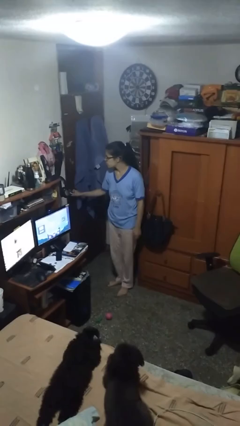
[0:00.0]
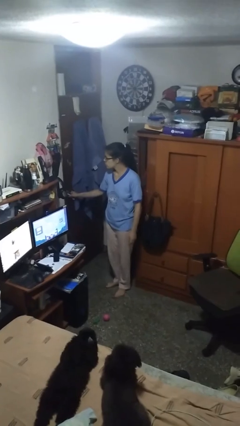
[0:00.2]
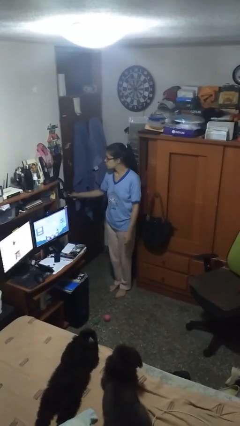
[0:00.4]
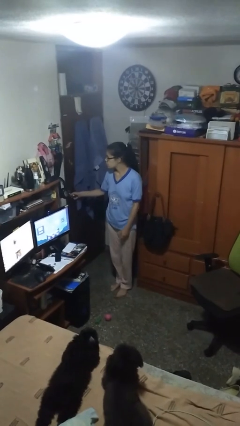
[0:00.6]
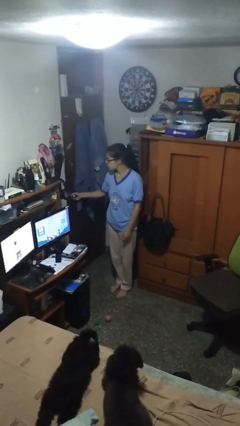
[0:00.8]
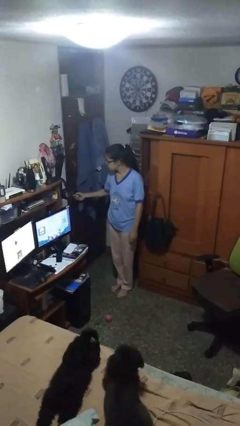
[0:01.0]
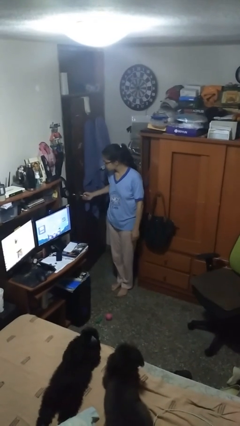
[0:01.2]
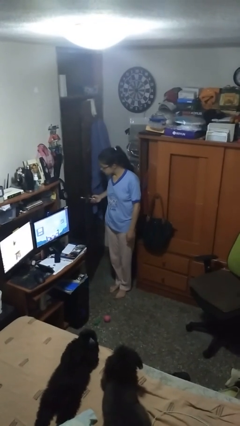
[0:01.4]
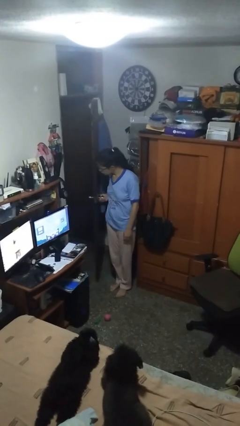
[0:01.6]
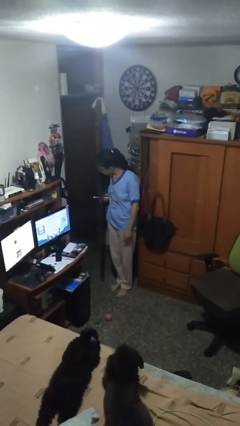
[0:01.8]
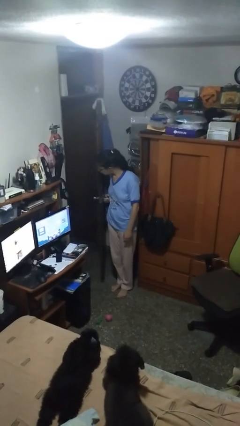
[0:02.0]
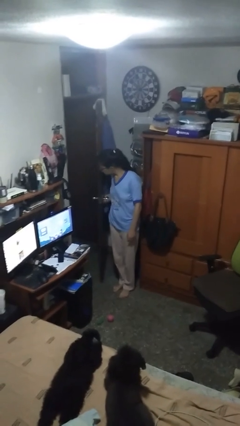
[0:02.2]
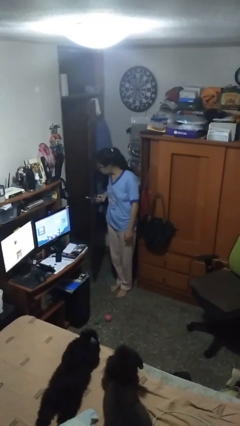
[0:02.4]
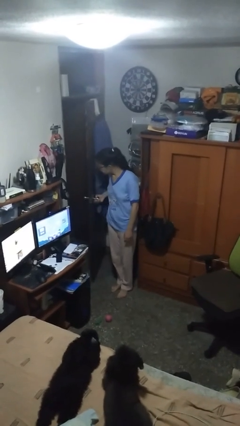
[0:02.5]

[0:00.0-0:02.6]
person opens facility door

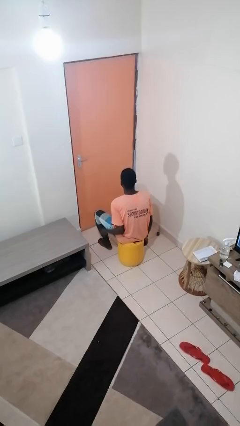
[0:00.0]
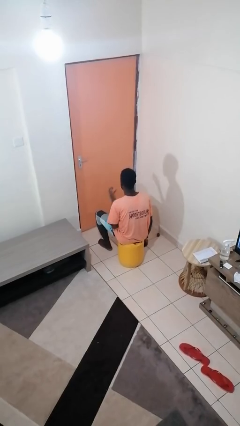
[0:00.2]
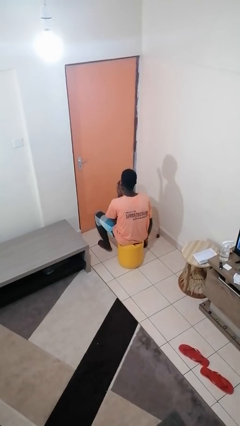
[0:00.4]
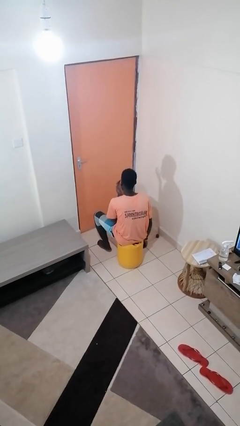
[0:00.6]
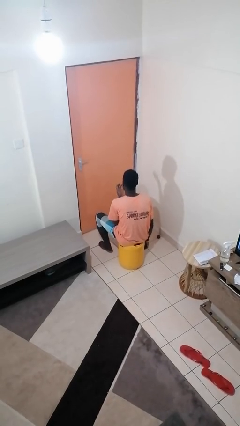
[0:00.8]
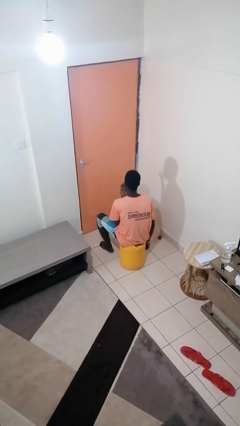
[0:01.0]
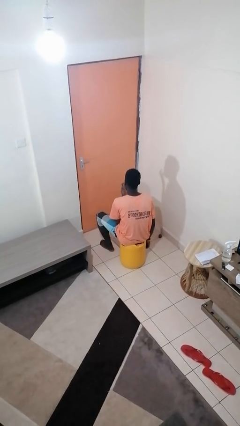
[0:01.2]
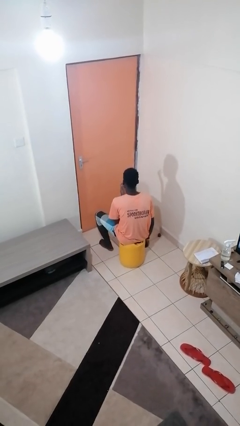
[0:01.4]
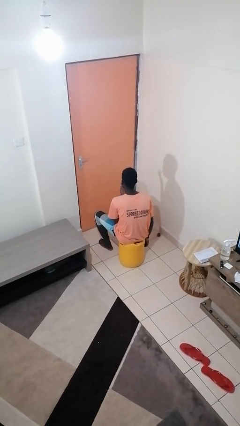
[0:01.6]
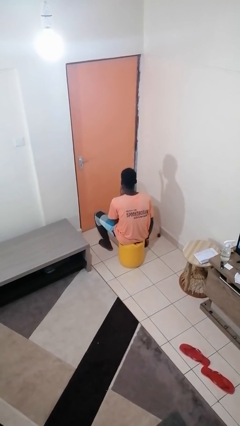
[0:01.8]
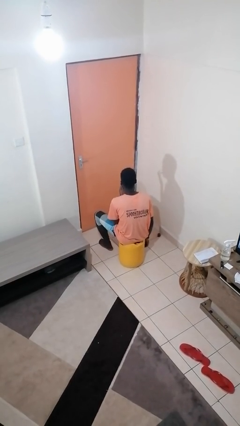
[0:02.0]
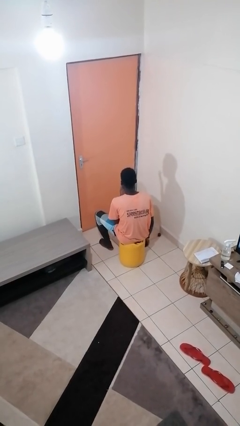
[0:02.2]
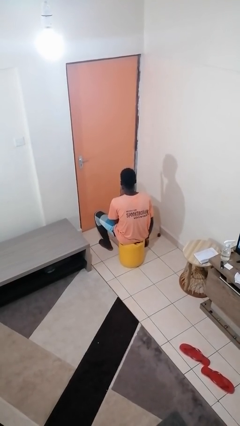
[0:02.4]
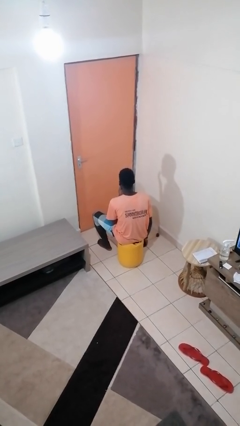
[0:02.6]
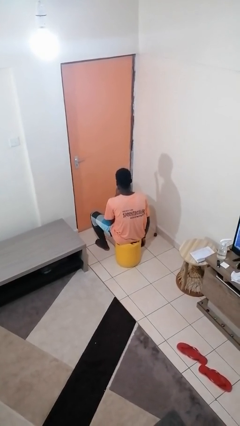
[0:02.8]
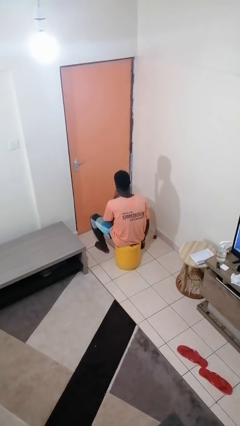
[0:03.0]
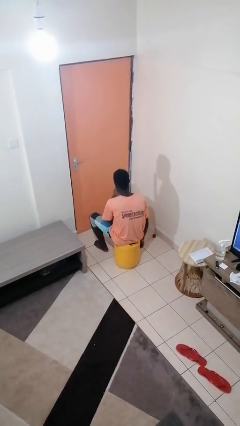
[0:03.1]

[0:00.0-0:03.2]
person licks fingers

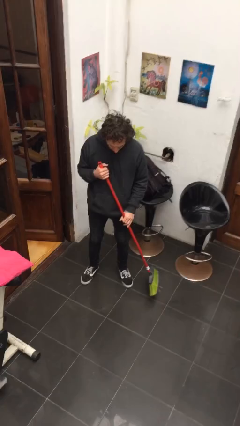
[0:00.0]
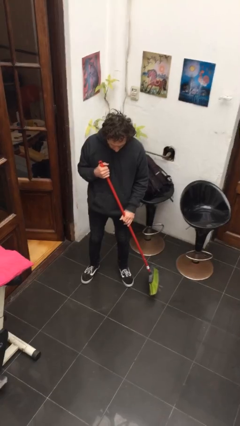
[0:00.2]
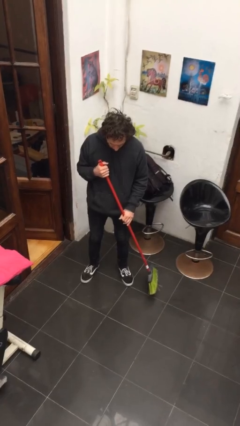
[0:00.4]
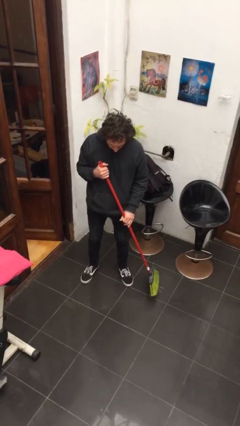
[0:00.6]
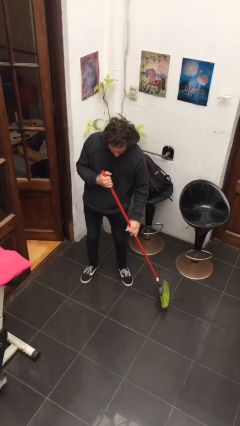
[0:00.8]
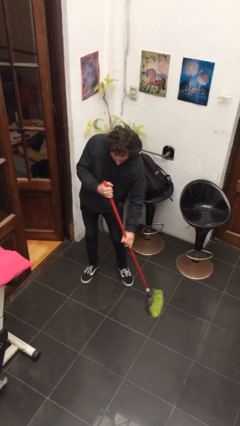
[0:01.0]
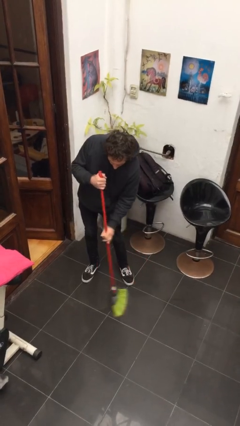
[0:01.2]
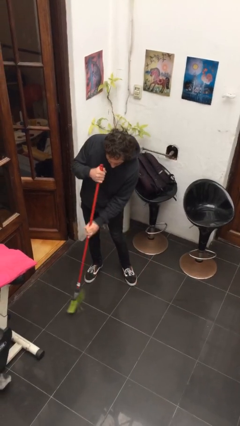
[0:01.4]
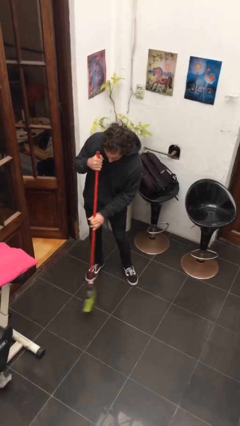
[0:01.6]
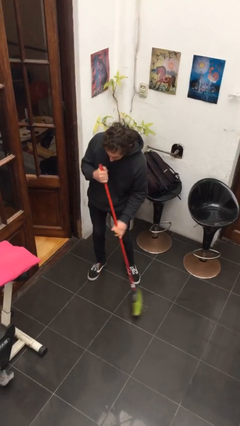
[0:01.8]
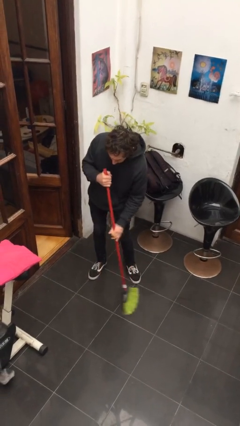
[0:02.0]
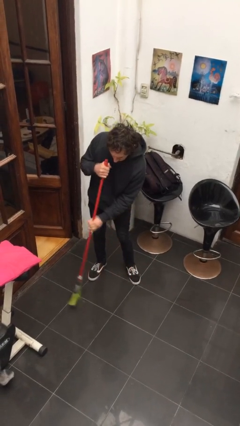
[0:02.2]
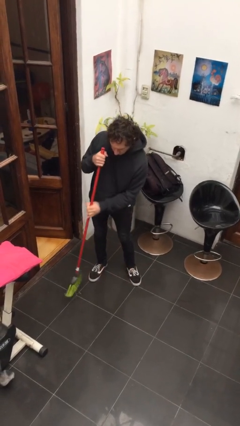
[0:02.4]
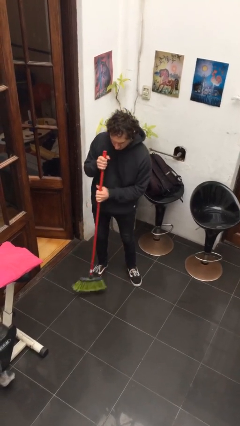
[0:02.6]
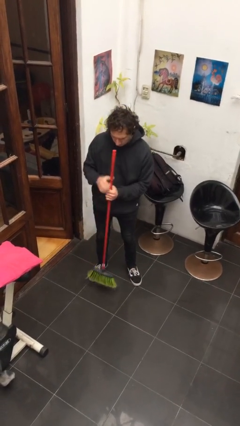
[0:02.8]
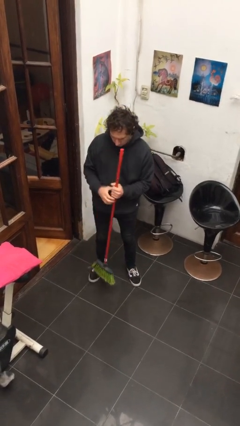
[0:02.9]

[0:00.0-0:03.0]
person sweeps floor

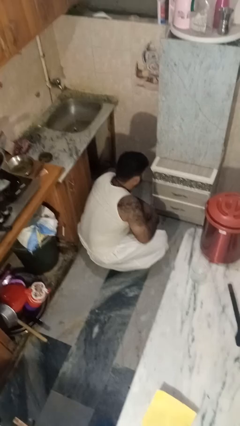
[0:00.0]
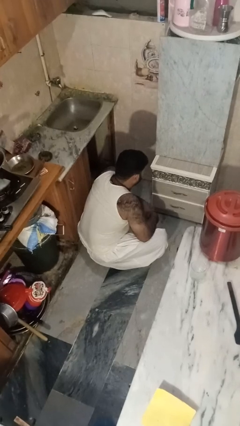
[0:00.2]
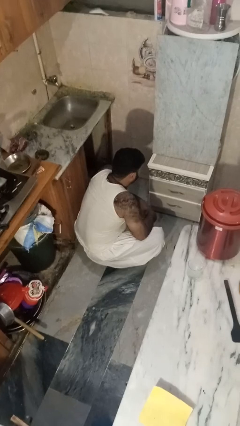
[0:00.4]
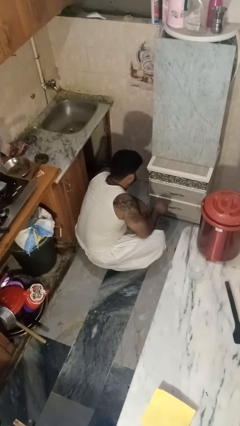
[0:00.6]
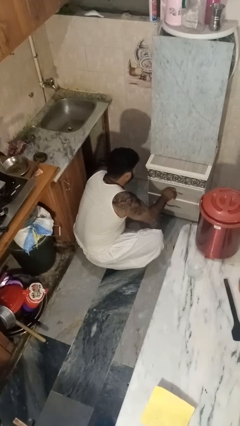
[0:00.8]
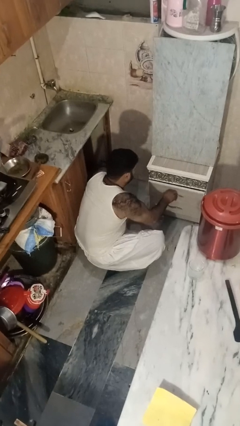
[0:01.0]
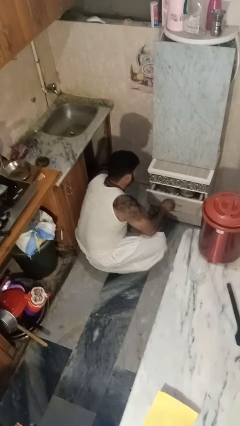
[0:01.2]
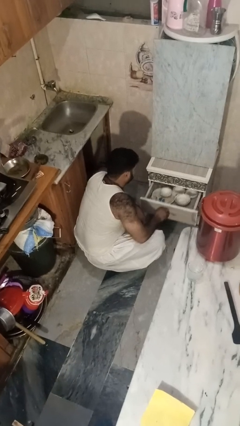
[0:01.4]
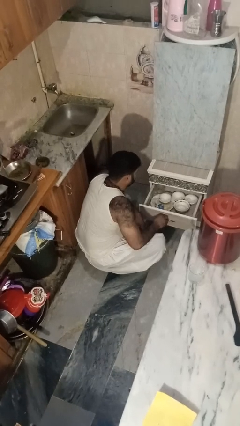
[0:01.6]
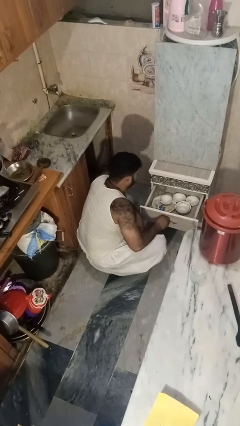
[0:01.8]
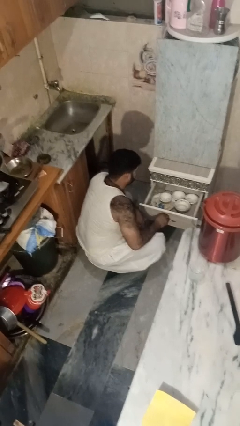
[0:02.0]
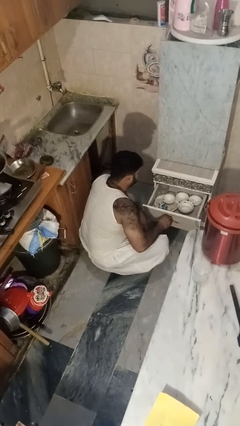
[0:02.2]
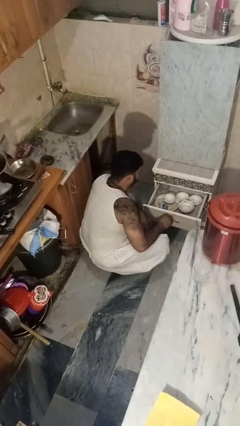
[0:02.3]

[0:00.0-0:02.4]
person opens kitchen drawer

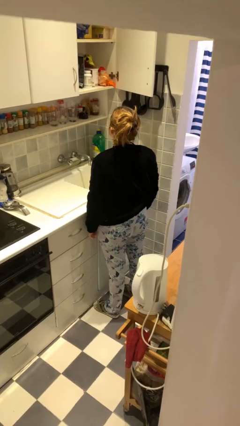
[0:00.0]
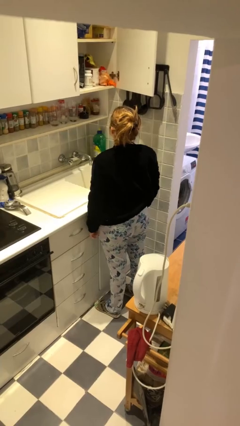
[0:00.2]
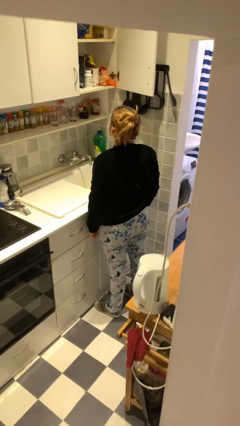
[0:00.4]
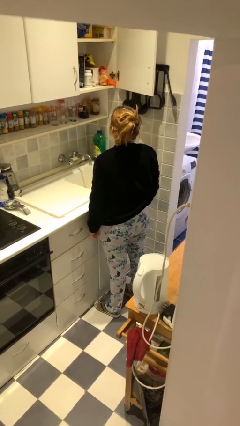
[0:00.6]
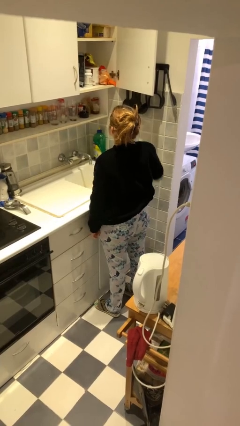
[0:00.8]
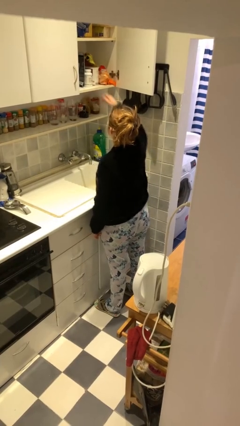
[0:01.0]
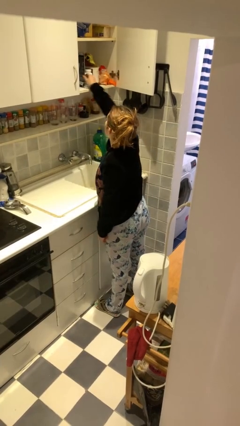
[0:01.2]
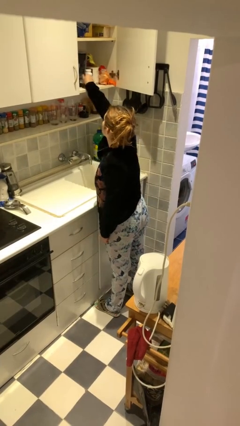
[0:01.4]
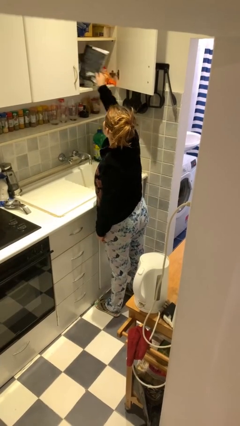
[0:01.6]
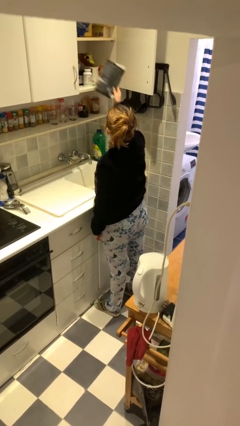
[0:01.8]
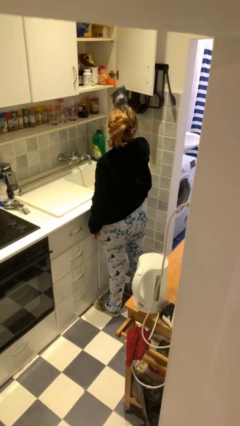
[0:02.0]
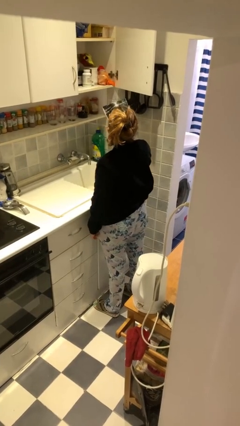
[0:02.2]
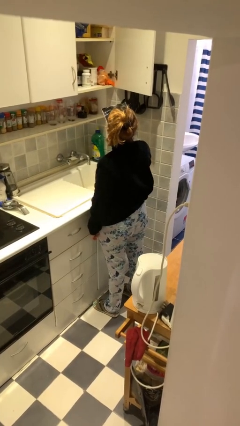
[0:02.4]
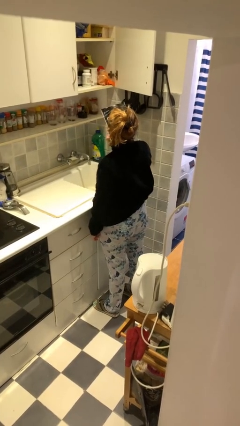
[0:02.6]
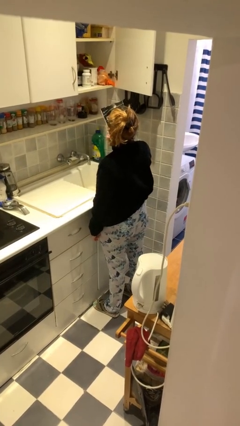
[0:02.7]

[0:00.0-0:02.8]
person puts object in cabinet

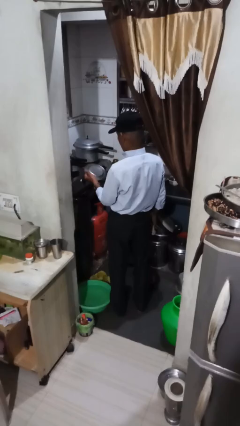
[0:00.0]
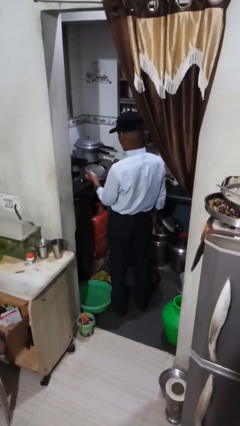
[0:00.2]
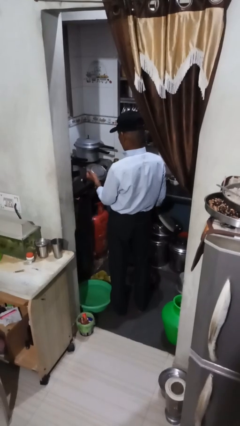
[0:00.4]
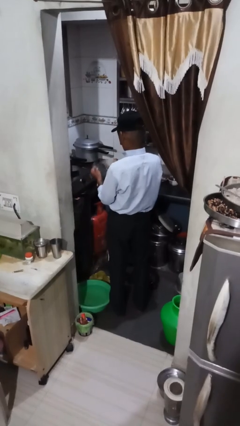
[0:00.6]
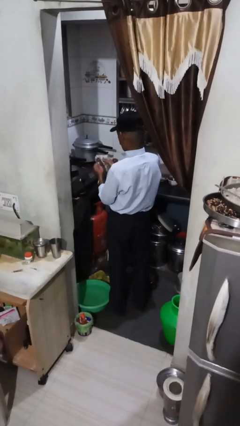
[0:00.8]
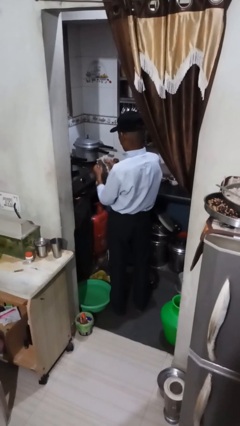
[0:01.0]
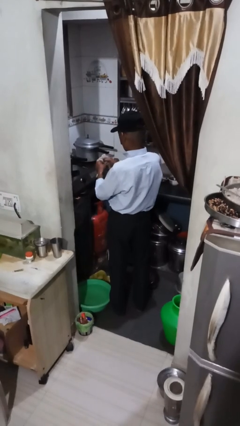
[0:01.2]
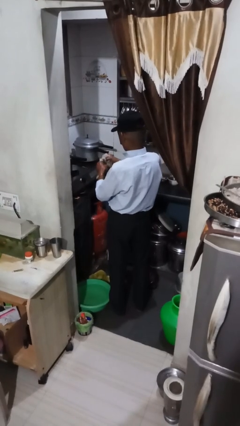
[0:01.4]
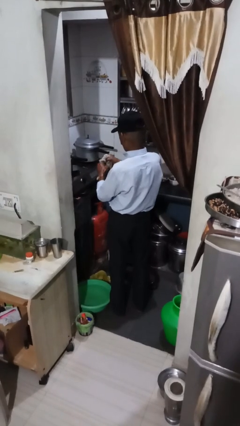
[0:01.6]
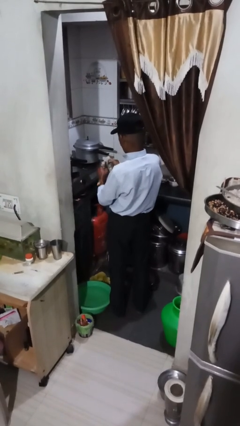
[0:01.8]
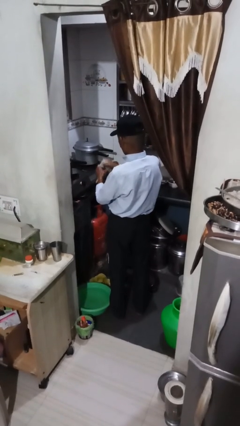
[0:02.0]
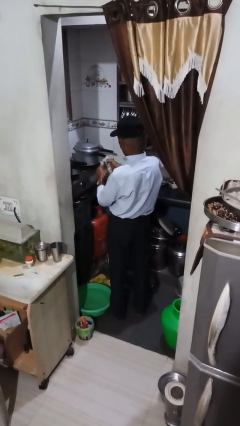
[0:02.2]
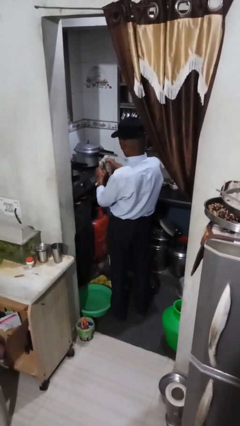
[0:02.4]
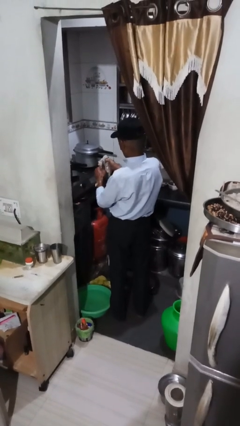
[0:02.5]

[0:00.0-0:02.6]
person dries dish

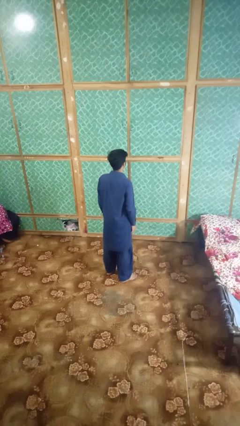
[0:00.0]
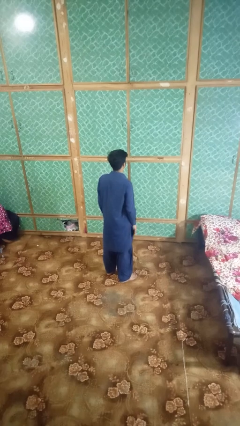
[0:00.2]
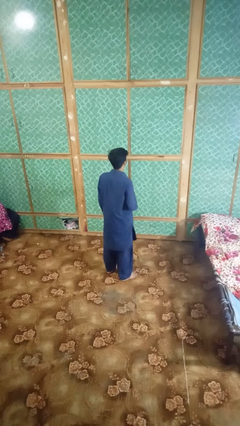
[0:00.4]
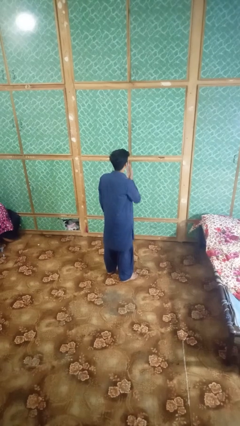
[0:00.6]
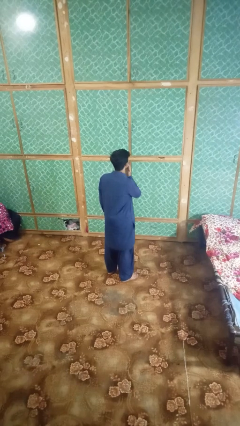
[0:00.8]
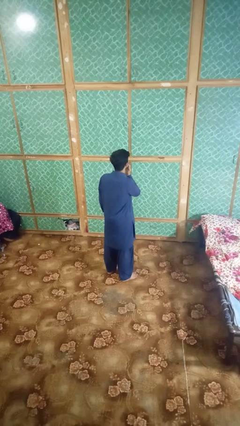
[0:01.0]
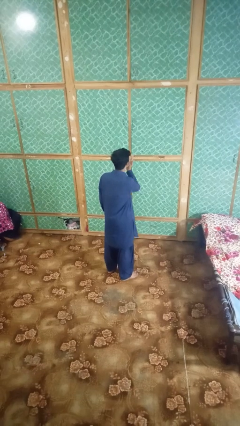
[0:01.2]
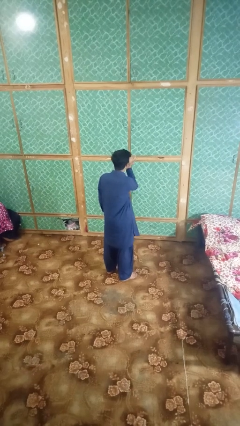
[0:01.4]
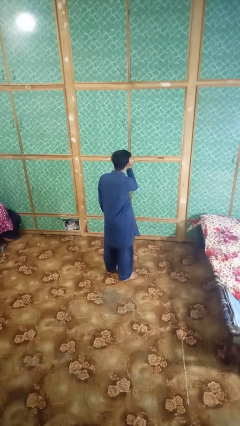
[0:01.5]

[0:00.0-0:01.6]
person gestures blow kiss
